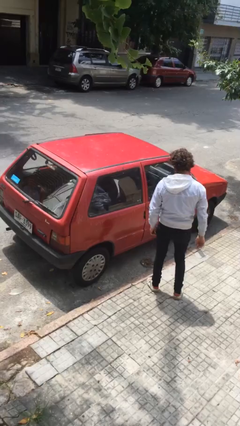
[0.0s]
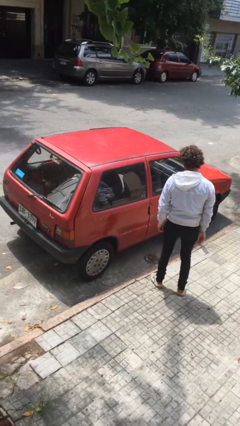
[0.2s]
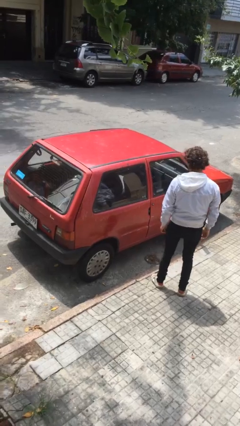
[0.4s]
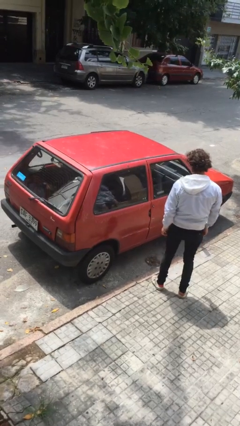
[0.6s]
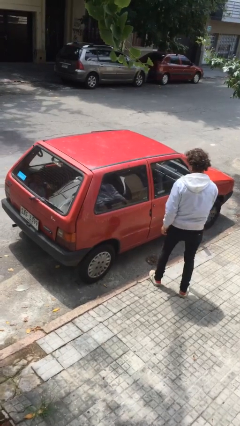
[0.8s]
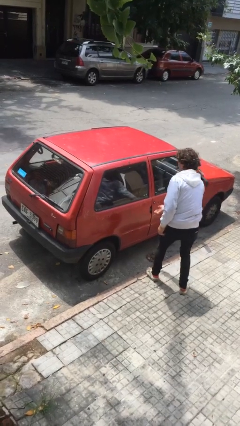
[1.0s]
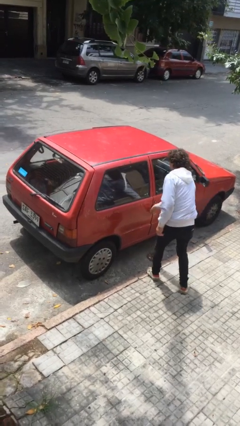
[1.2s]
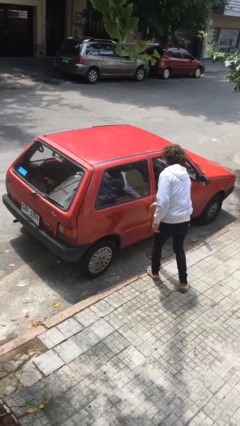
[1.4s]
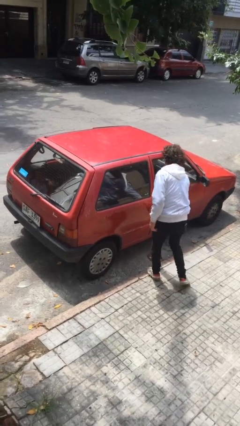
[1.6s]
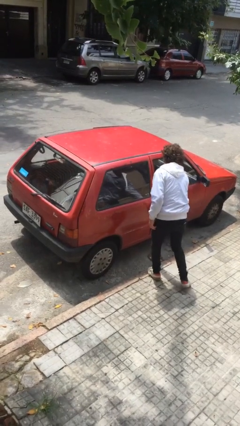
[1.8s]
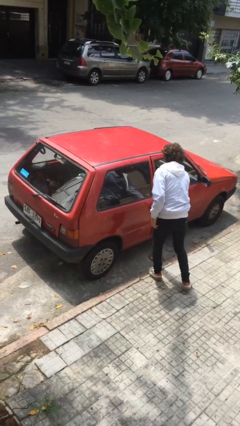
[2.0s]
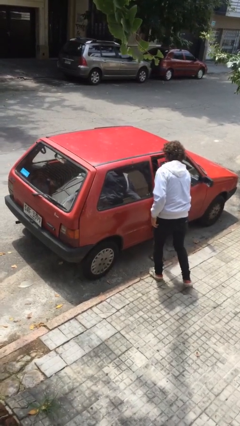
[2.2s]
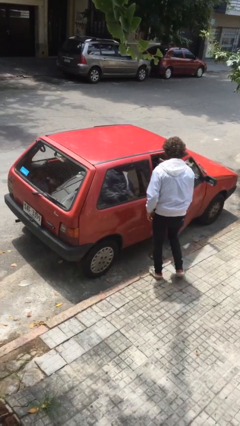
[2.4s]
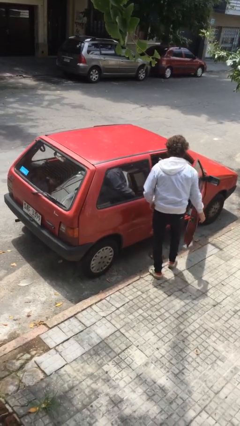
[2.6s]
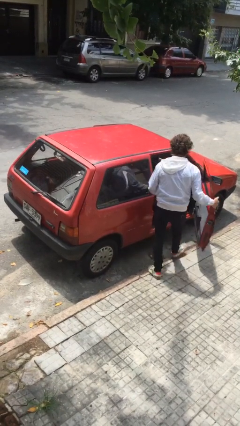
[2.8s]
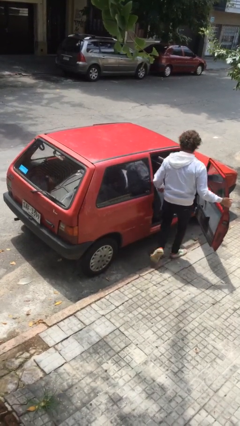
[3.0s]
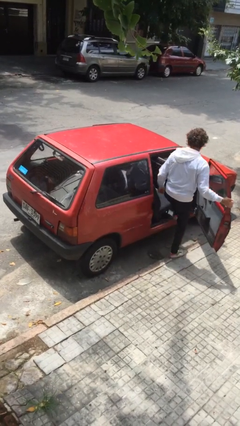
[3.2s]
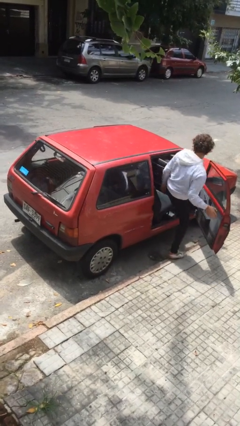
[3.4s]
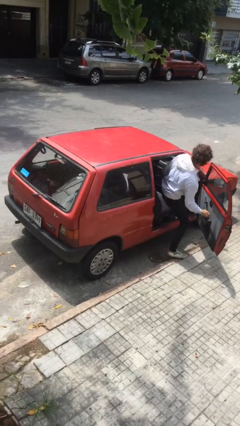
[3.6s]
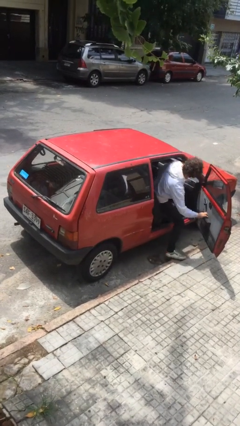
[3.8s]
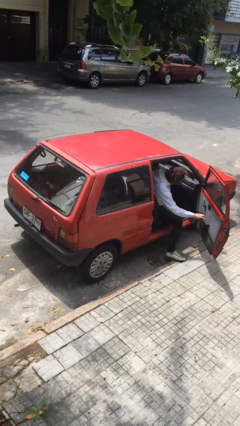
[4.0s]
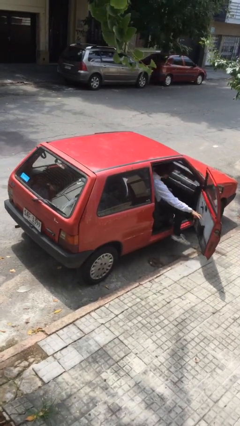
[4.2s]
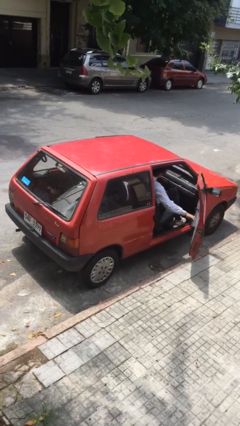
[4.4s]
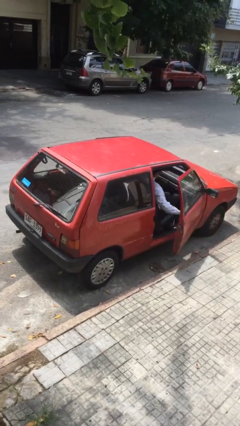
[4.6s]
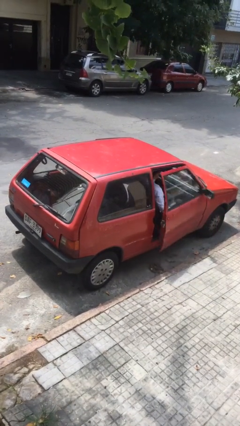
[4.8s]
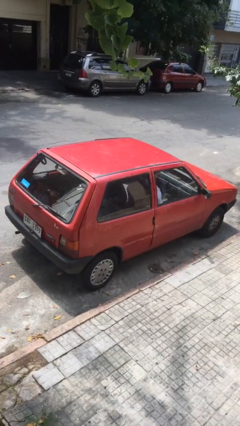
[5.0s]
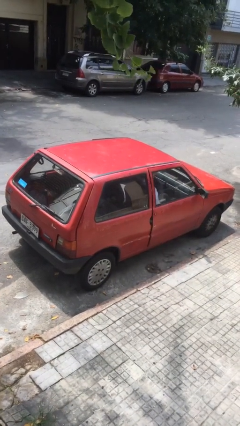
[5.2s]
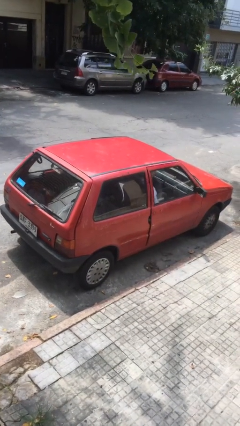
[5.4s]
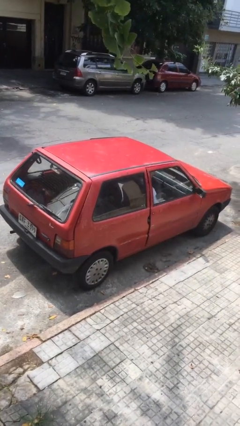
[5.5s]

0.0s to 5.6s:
car picks up person

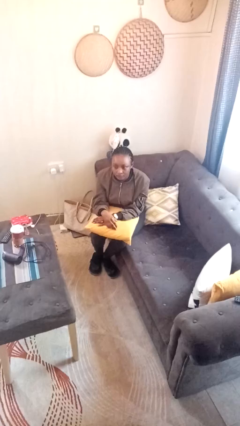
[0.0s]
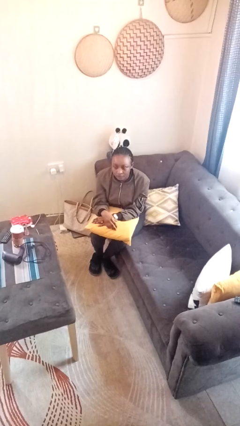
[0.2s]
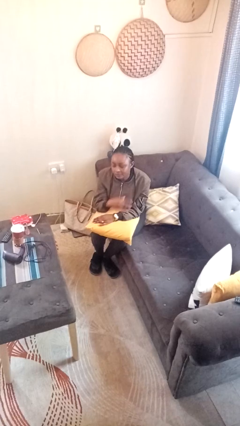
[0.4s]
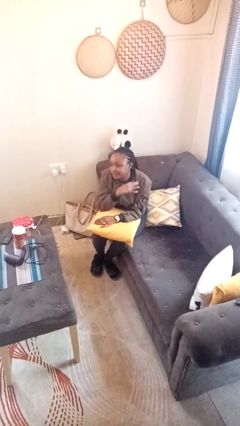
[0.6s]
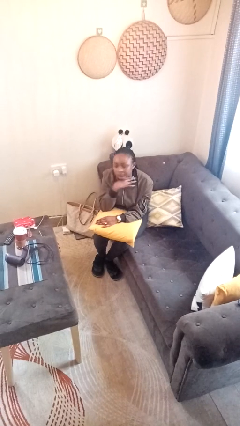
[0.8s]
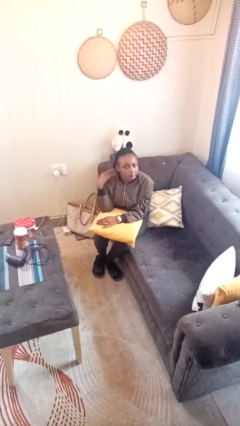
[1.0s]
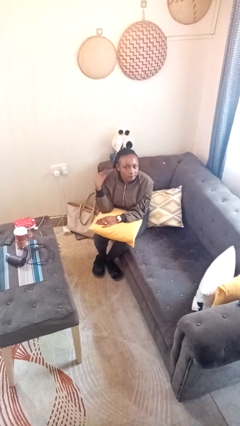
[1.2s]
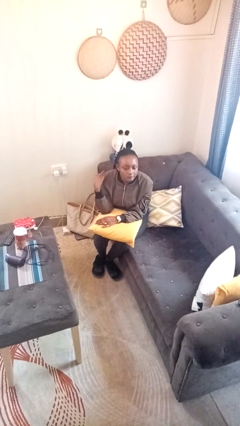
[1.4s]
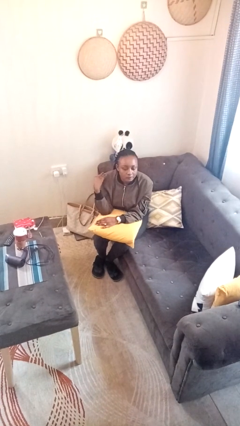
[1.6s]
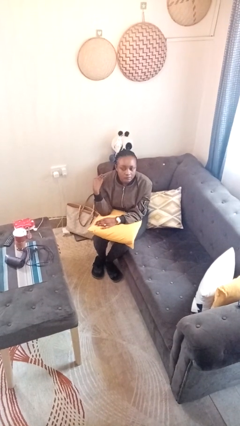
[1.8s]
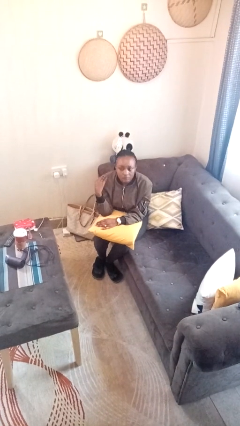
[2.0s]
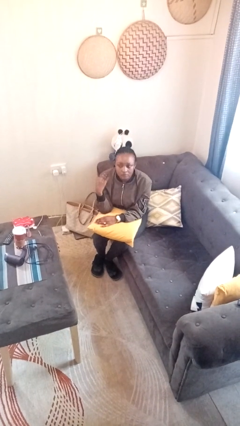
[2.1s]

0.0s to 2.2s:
person gestures cut

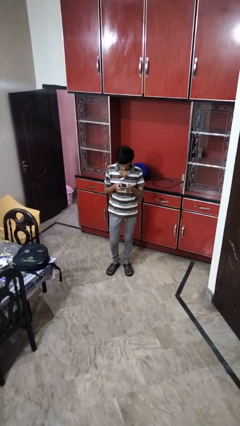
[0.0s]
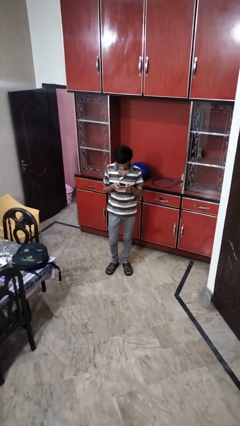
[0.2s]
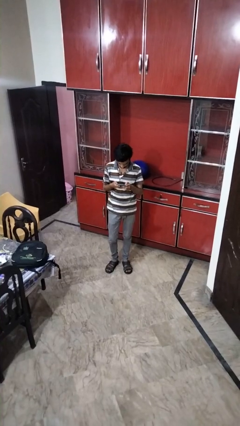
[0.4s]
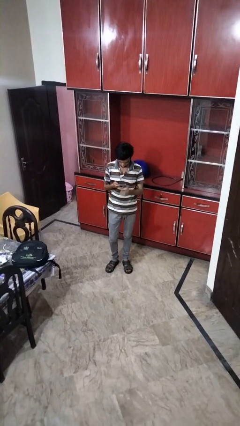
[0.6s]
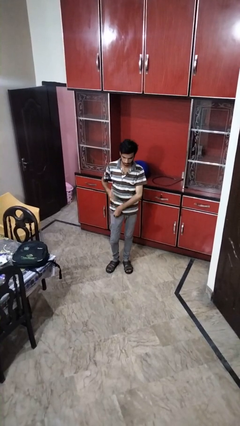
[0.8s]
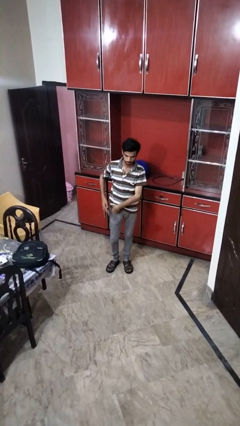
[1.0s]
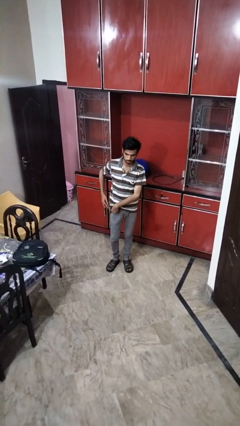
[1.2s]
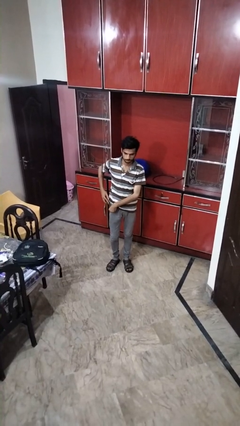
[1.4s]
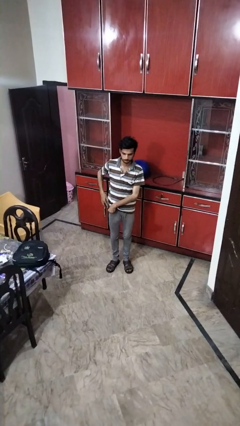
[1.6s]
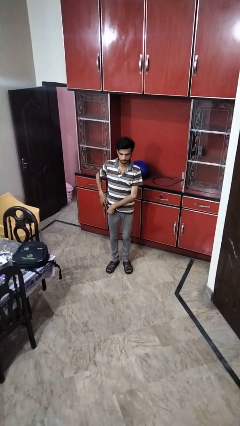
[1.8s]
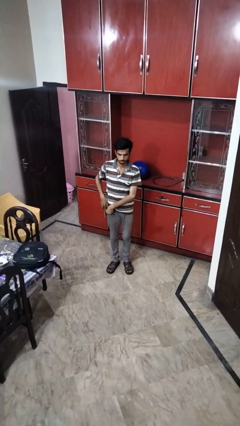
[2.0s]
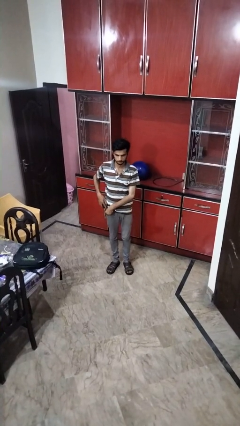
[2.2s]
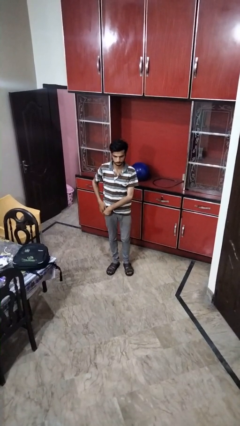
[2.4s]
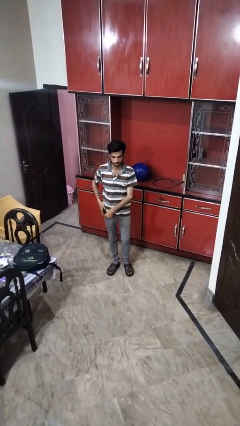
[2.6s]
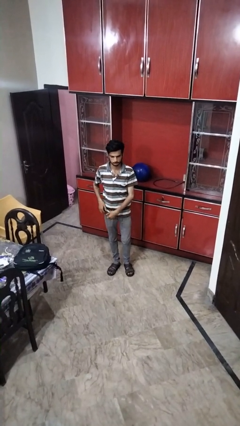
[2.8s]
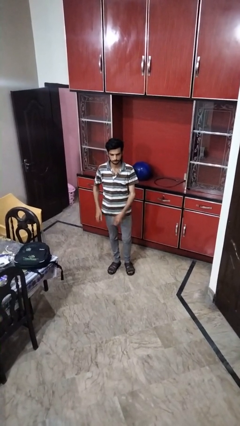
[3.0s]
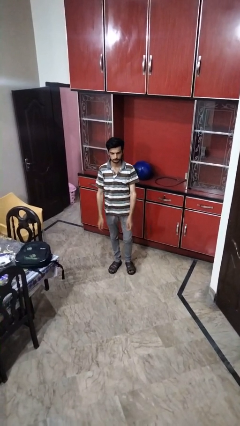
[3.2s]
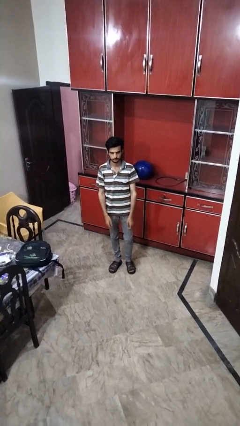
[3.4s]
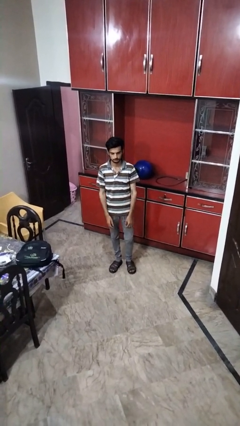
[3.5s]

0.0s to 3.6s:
person puts phone into pocket

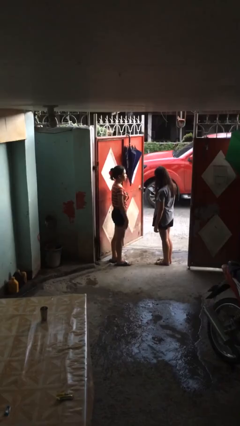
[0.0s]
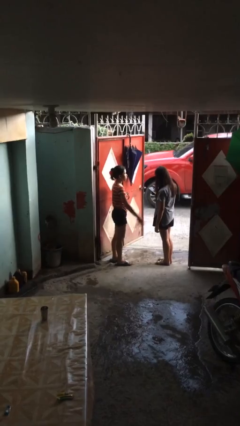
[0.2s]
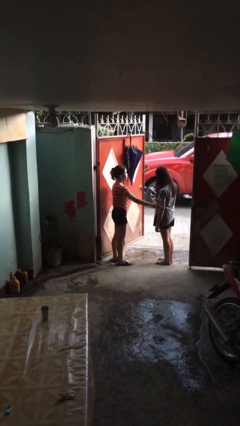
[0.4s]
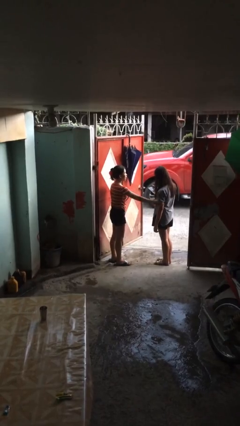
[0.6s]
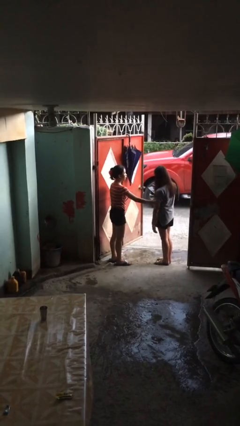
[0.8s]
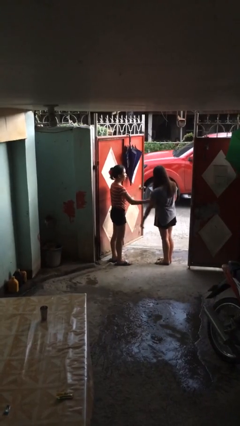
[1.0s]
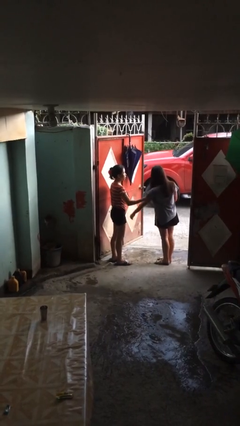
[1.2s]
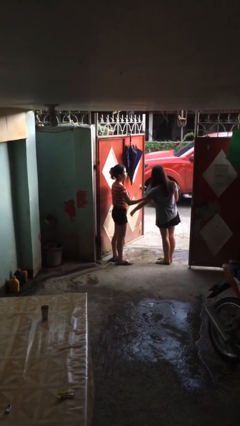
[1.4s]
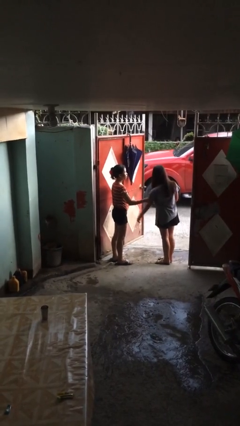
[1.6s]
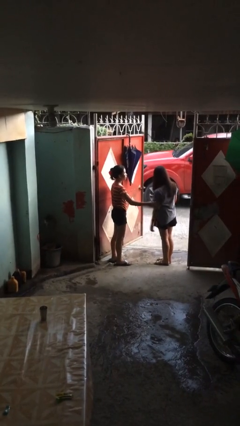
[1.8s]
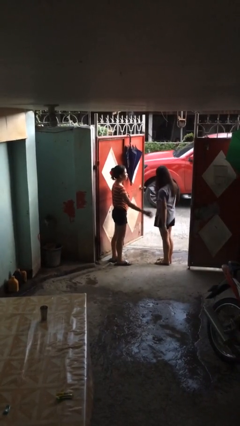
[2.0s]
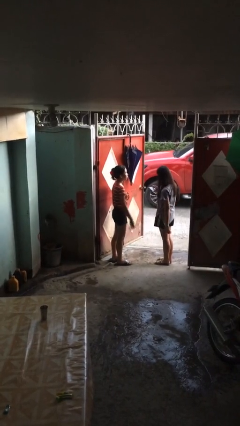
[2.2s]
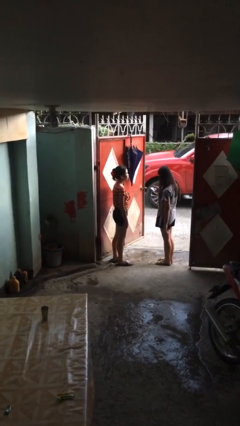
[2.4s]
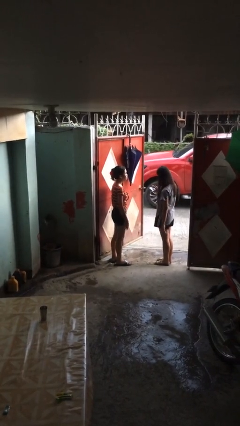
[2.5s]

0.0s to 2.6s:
person grabs person by bicep

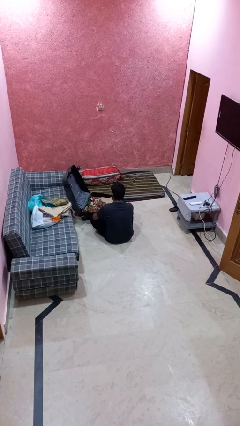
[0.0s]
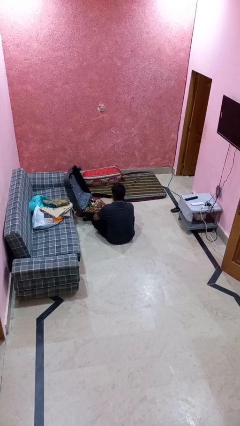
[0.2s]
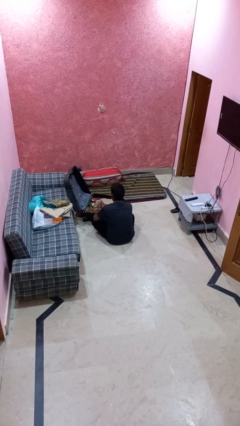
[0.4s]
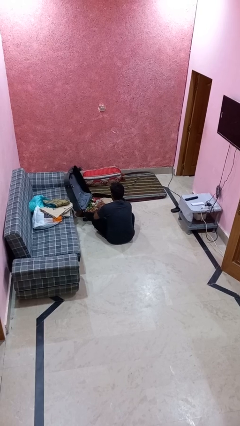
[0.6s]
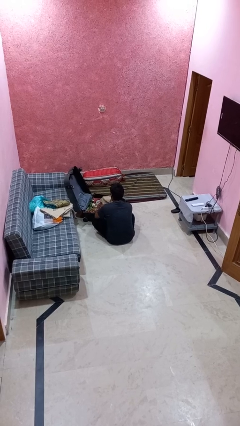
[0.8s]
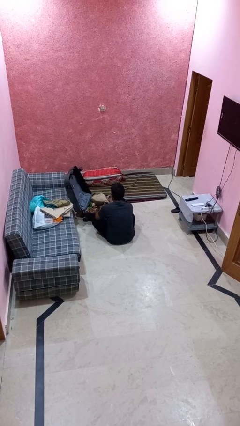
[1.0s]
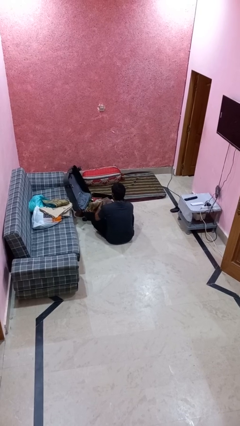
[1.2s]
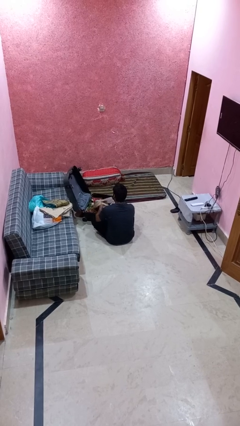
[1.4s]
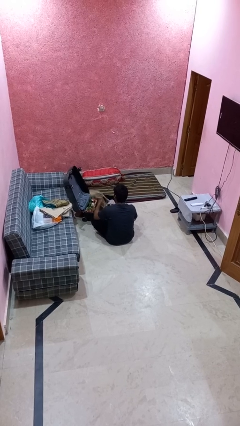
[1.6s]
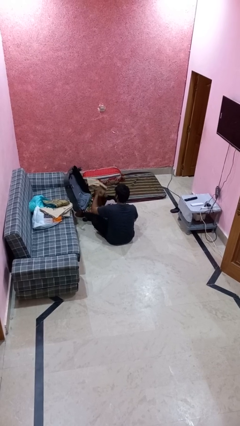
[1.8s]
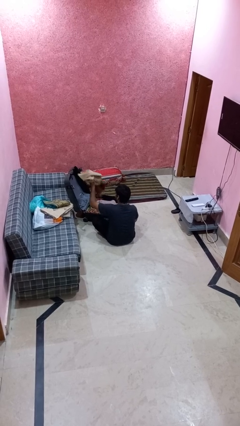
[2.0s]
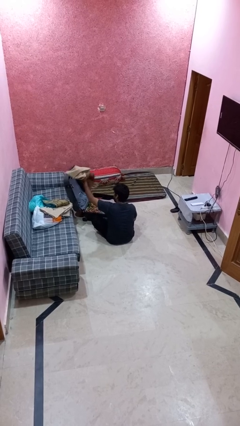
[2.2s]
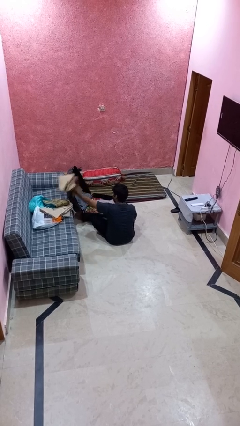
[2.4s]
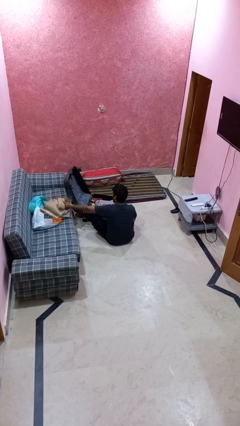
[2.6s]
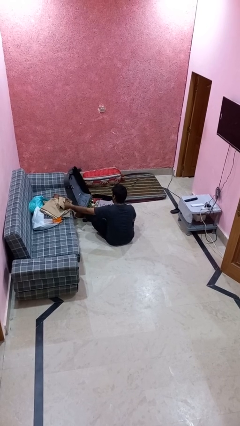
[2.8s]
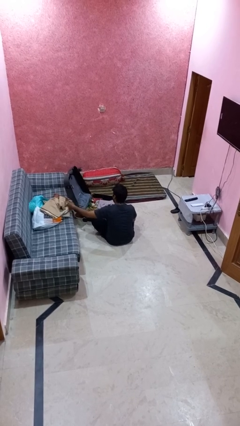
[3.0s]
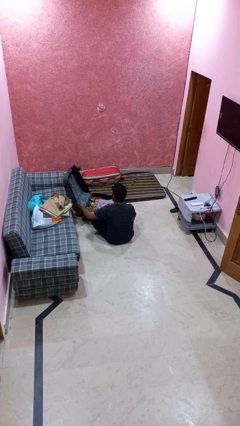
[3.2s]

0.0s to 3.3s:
person unloads clothes from suitcase

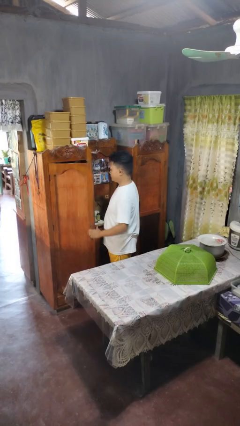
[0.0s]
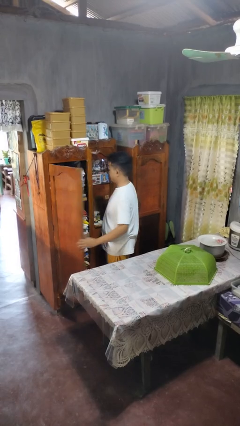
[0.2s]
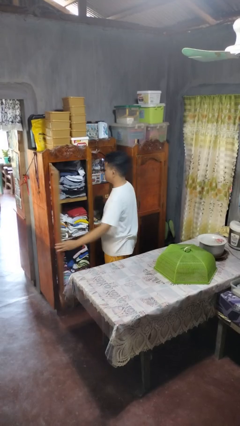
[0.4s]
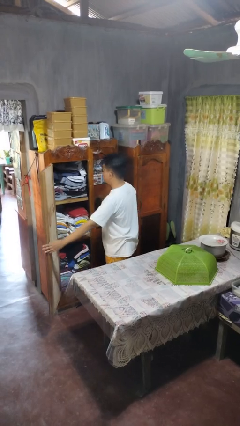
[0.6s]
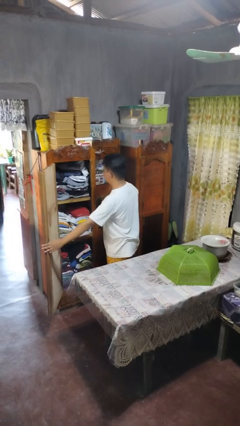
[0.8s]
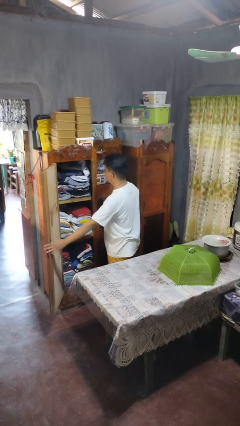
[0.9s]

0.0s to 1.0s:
person opens closet door
